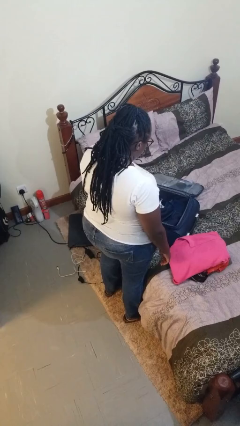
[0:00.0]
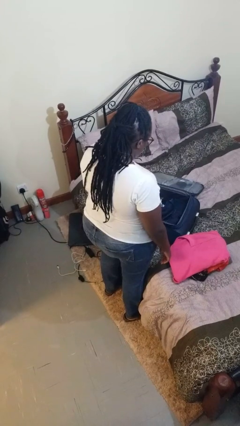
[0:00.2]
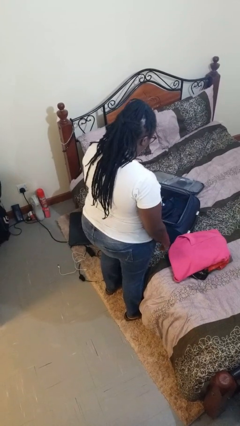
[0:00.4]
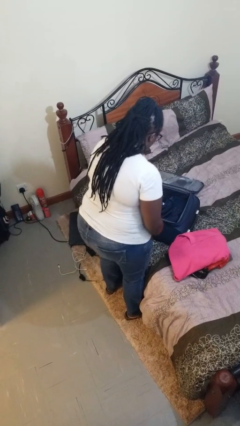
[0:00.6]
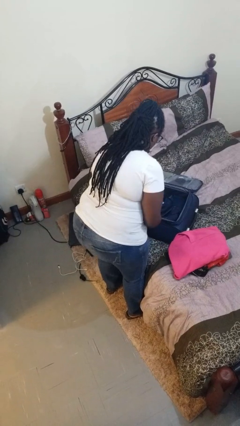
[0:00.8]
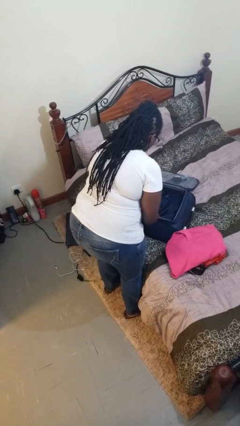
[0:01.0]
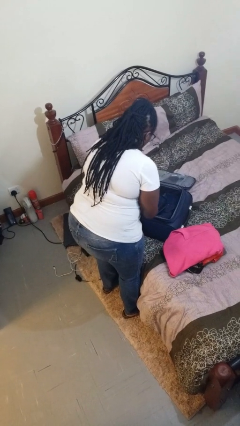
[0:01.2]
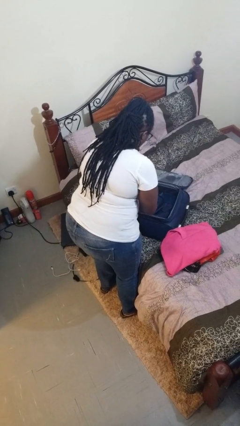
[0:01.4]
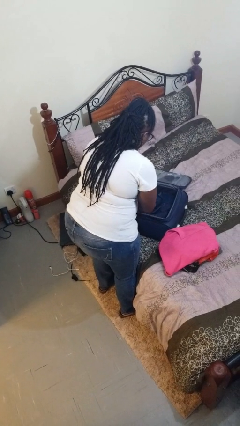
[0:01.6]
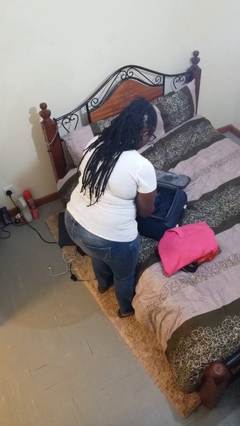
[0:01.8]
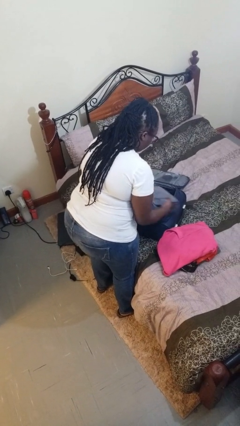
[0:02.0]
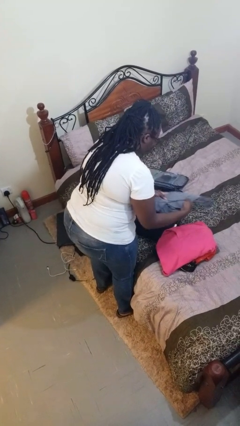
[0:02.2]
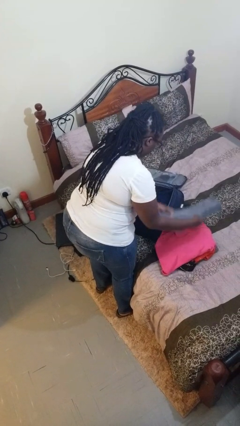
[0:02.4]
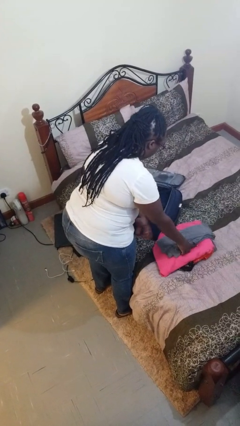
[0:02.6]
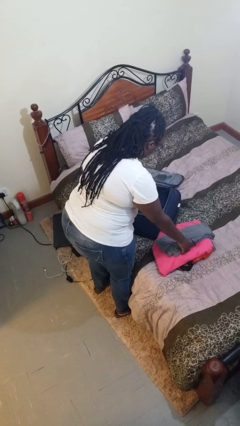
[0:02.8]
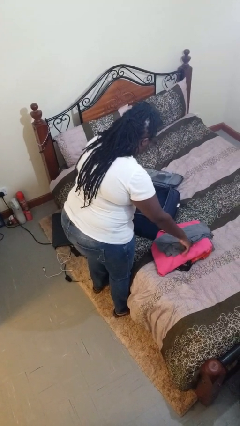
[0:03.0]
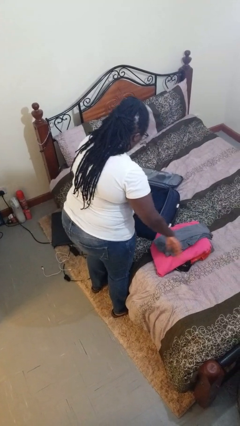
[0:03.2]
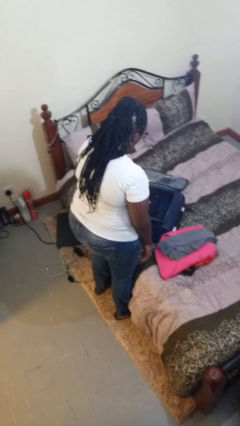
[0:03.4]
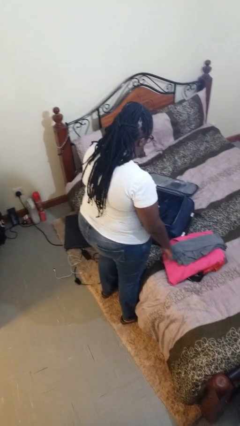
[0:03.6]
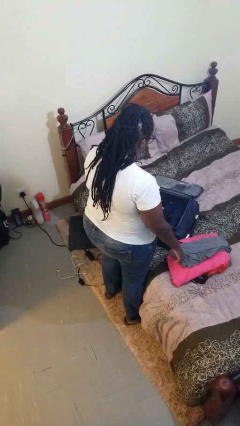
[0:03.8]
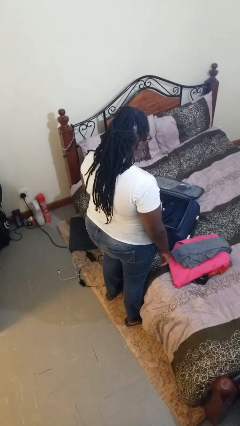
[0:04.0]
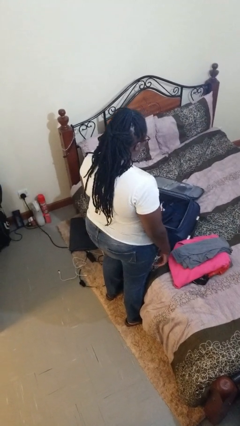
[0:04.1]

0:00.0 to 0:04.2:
person unloads clothes from suitcase

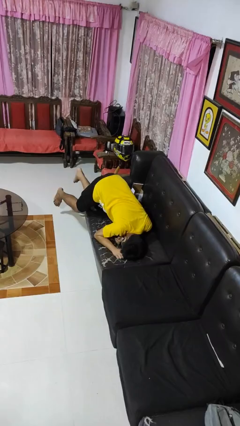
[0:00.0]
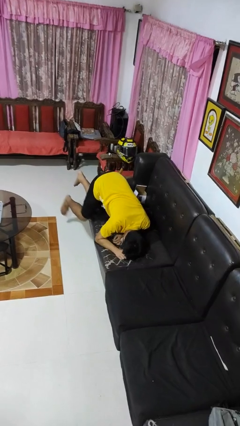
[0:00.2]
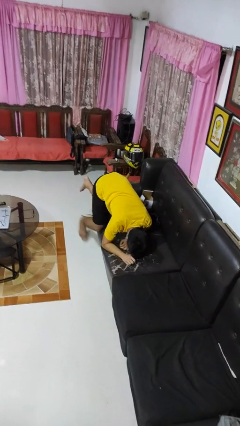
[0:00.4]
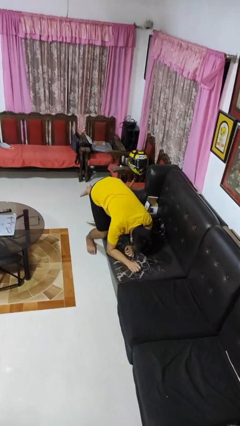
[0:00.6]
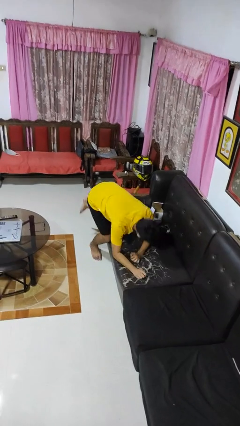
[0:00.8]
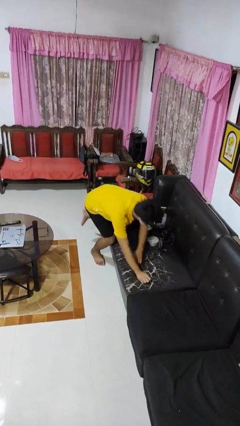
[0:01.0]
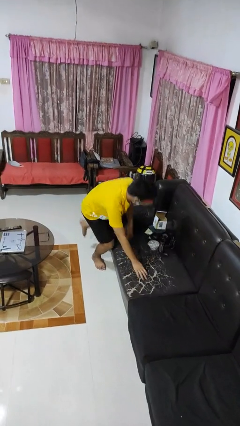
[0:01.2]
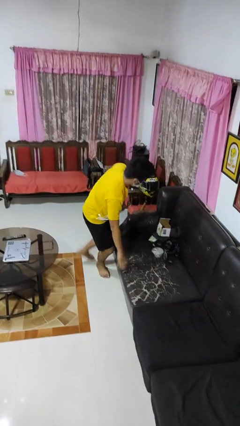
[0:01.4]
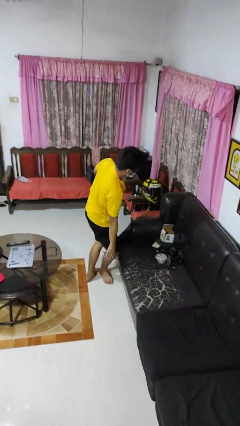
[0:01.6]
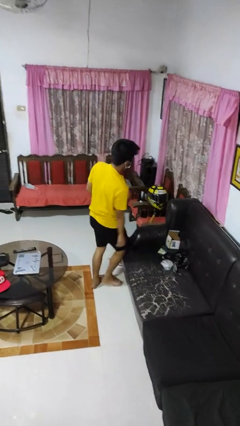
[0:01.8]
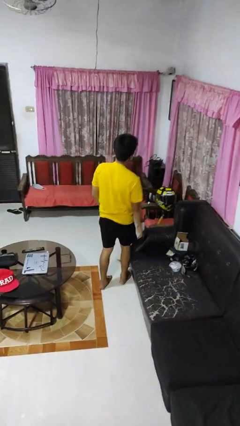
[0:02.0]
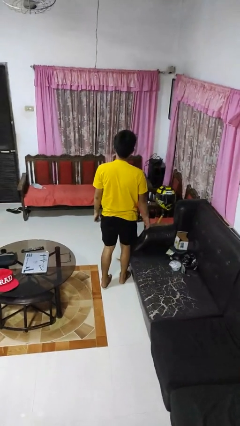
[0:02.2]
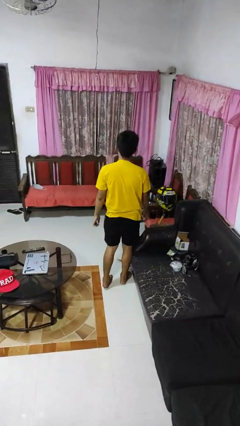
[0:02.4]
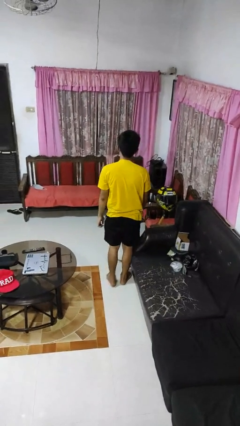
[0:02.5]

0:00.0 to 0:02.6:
person stands up

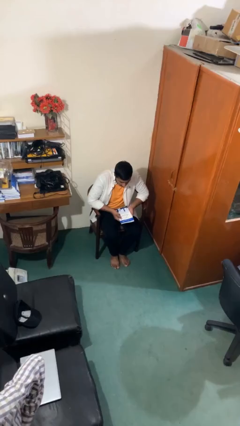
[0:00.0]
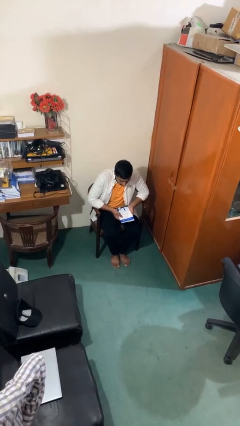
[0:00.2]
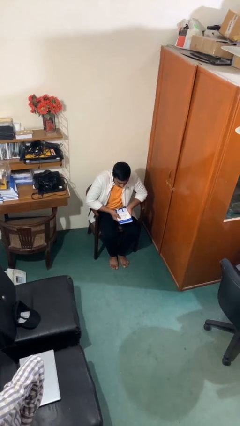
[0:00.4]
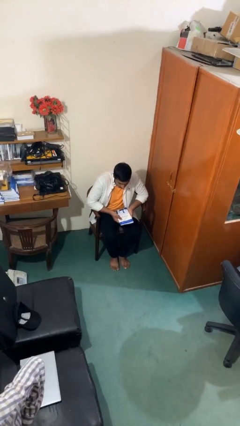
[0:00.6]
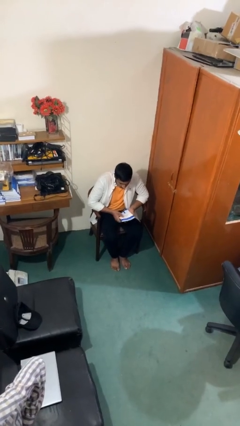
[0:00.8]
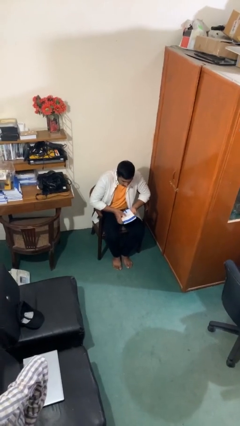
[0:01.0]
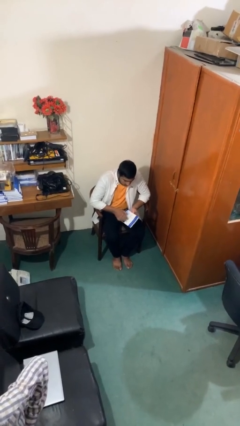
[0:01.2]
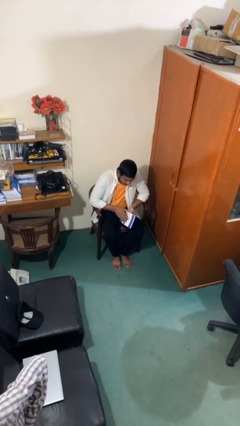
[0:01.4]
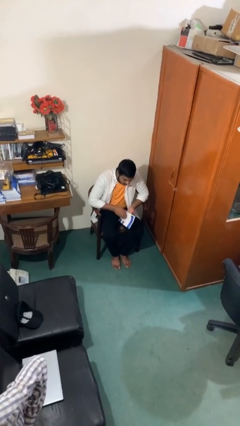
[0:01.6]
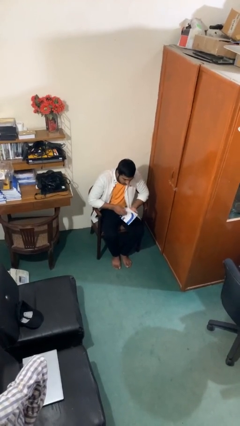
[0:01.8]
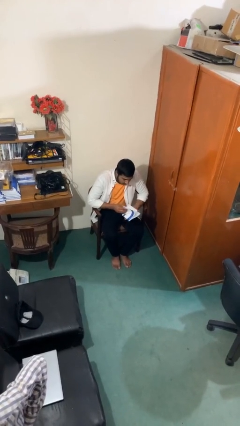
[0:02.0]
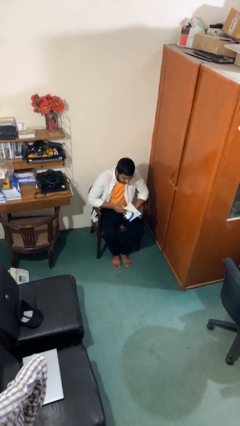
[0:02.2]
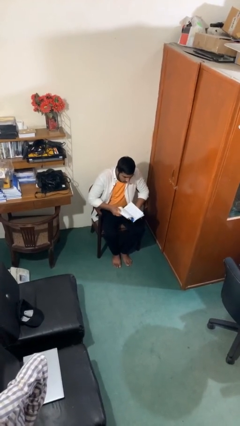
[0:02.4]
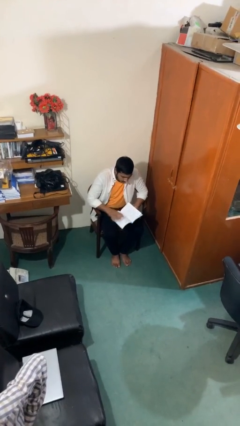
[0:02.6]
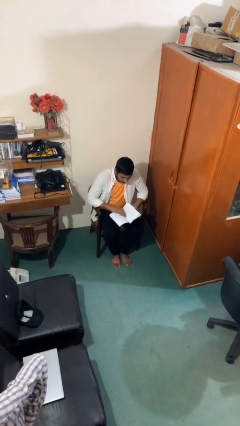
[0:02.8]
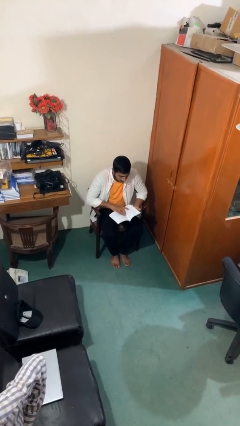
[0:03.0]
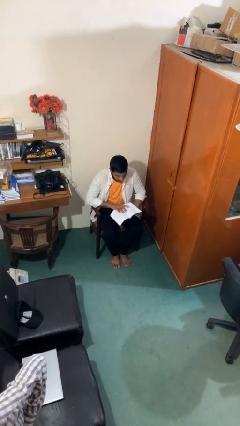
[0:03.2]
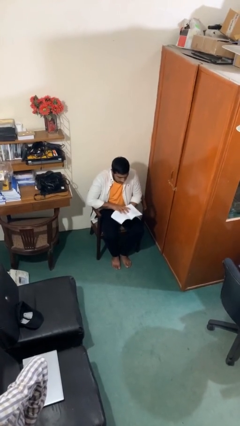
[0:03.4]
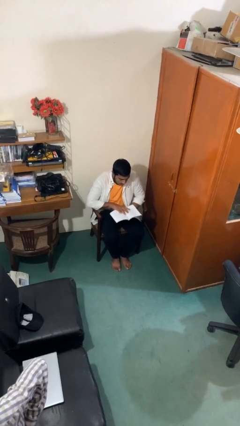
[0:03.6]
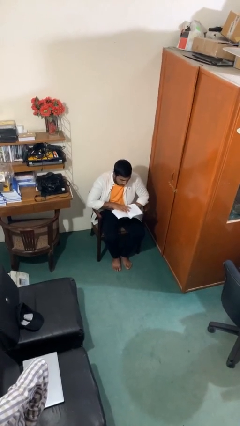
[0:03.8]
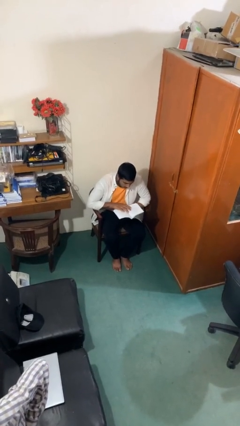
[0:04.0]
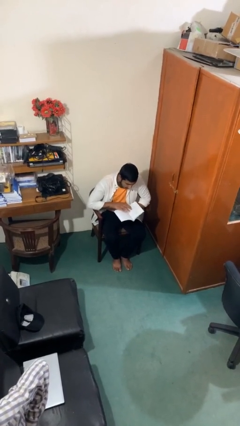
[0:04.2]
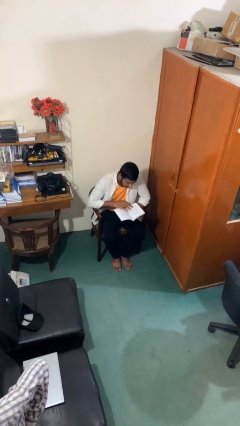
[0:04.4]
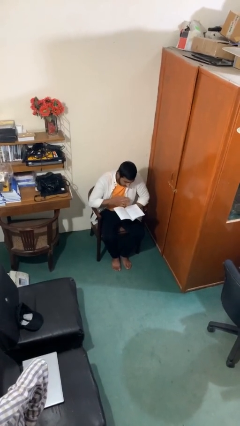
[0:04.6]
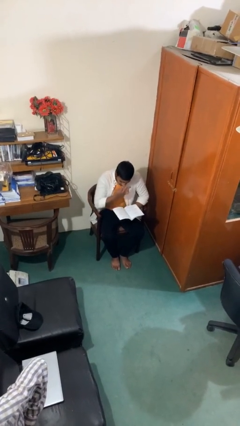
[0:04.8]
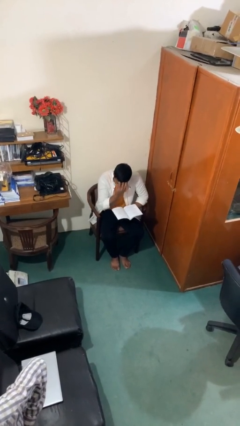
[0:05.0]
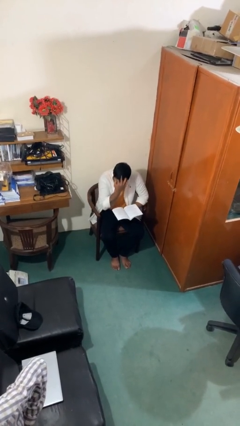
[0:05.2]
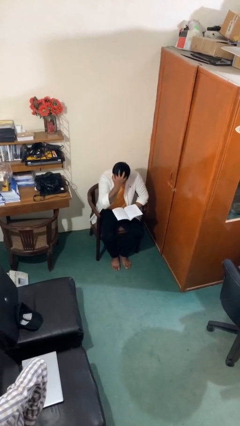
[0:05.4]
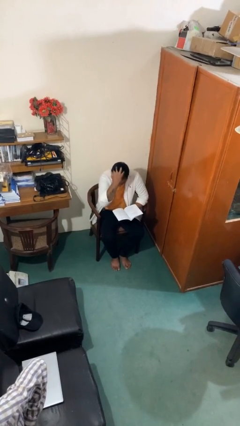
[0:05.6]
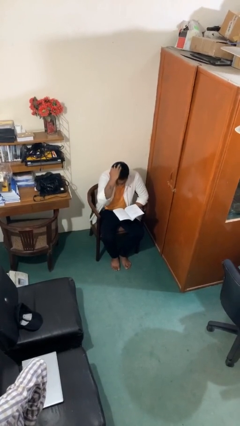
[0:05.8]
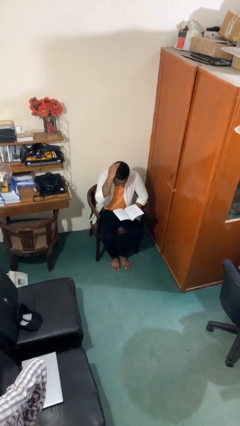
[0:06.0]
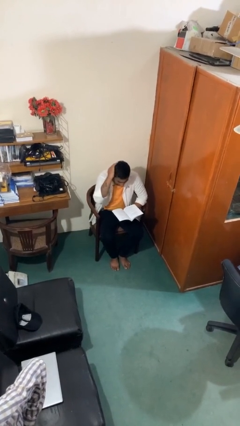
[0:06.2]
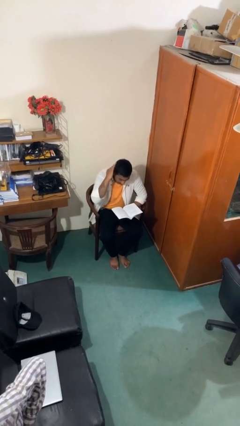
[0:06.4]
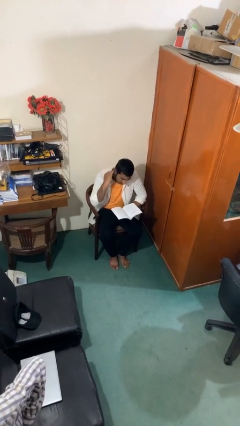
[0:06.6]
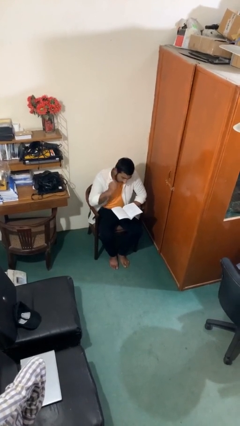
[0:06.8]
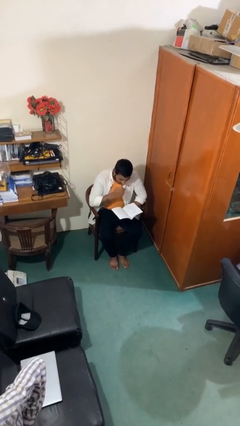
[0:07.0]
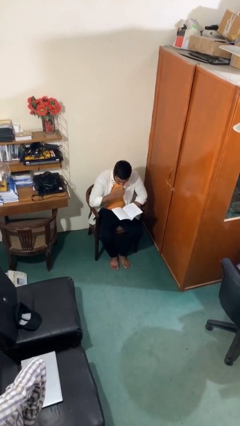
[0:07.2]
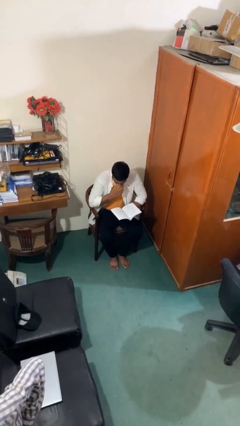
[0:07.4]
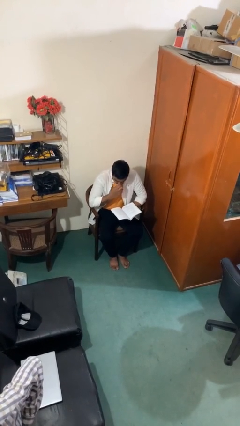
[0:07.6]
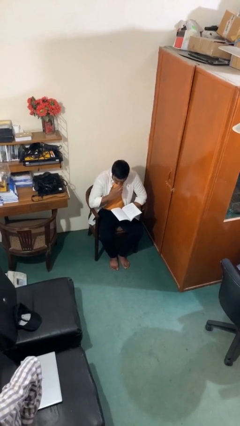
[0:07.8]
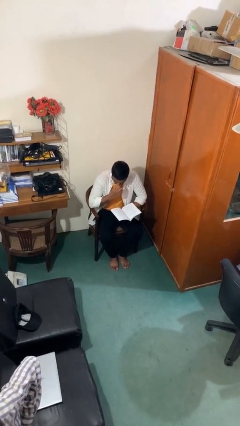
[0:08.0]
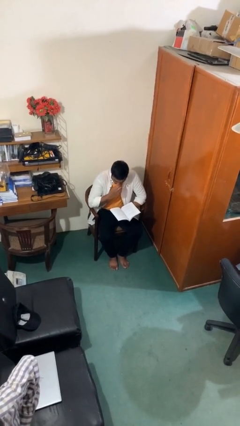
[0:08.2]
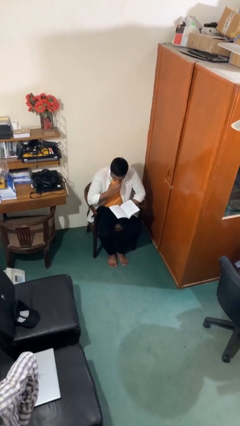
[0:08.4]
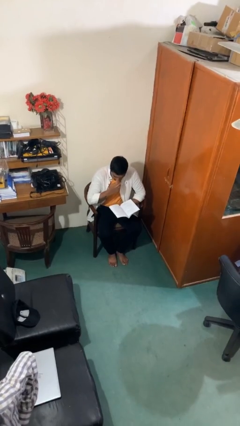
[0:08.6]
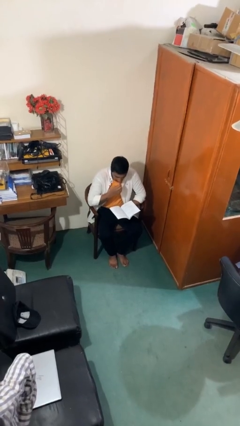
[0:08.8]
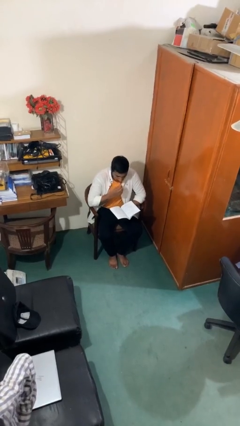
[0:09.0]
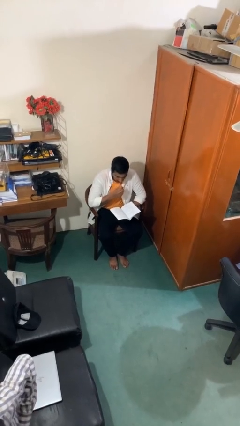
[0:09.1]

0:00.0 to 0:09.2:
person reads document

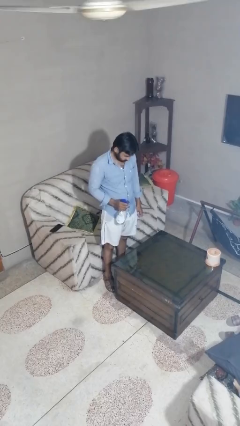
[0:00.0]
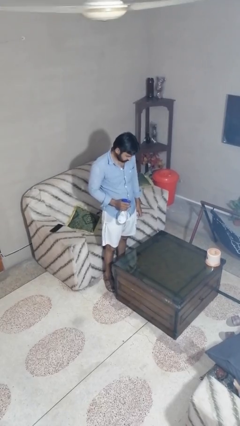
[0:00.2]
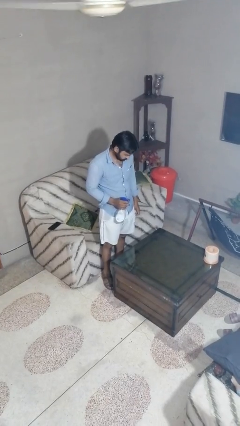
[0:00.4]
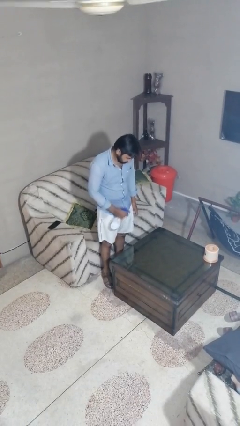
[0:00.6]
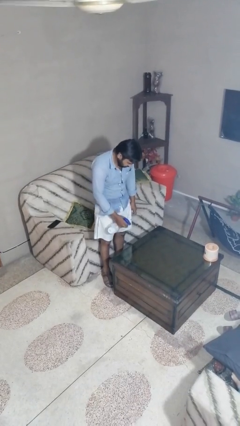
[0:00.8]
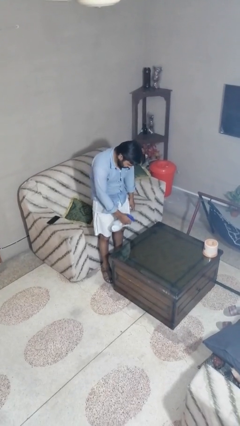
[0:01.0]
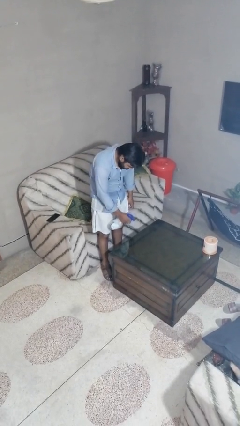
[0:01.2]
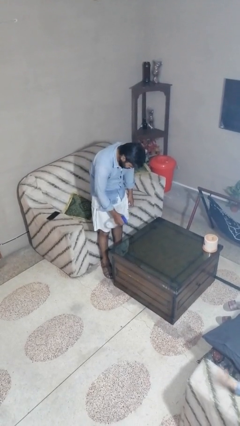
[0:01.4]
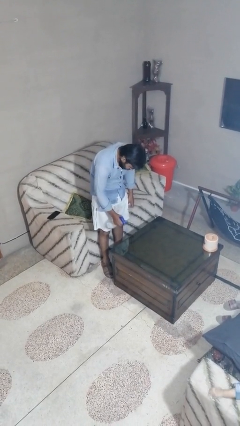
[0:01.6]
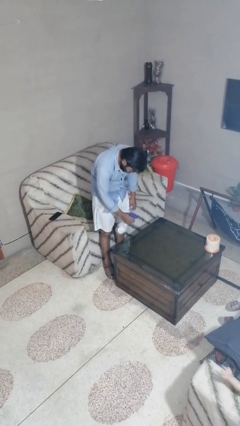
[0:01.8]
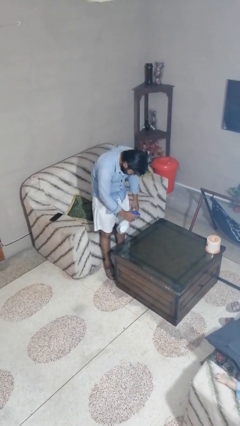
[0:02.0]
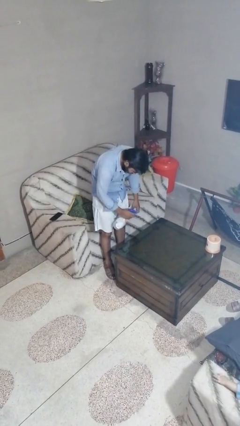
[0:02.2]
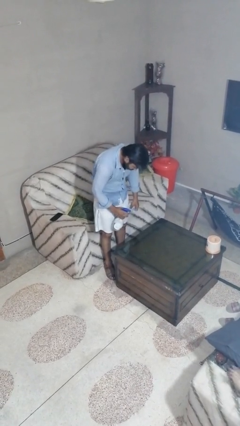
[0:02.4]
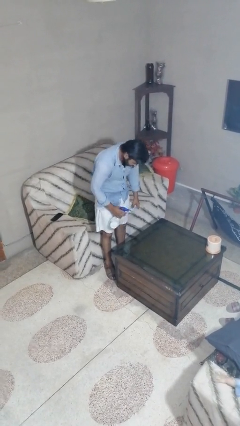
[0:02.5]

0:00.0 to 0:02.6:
person sprays from bottle
